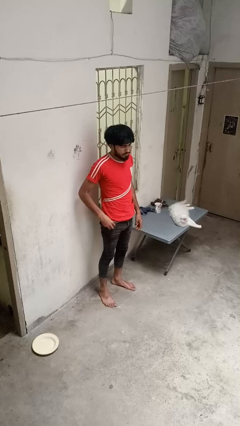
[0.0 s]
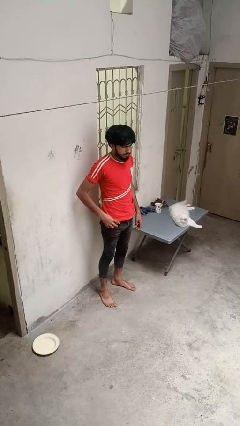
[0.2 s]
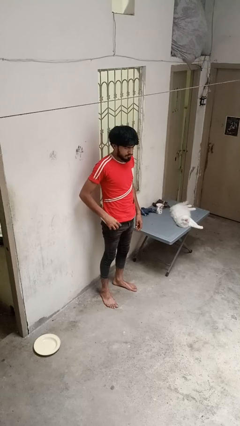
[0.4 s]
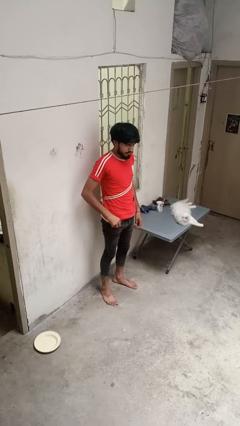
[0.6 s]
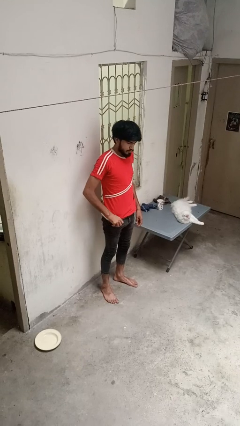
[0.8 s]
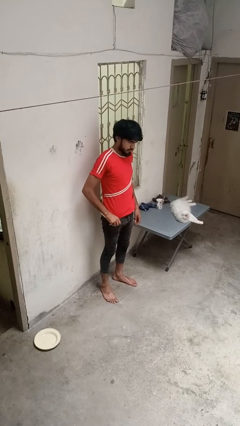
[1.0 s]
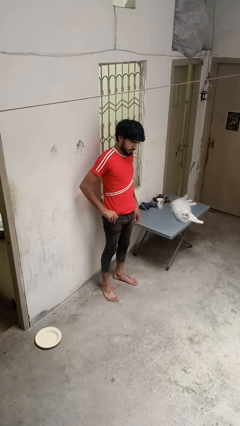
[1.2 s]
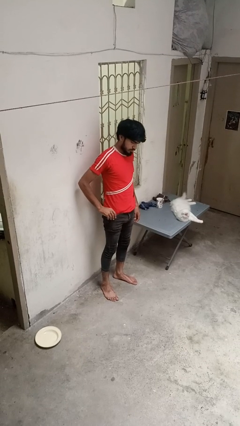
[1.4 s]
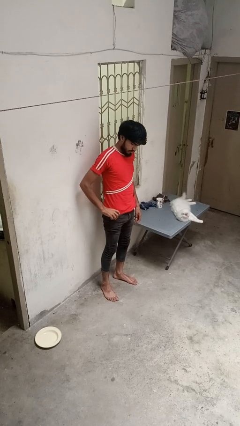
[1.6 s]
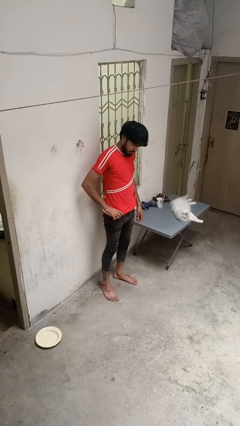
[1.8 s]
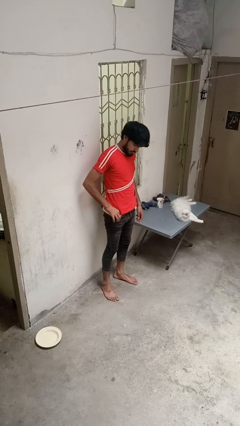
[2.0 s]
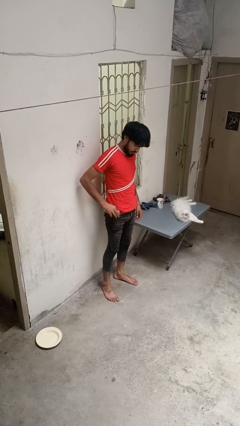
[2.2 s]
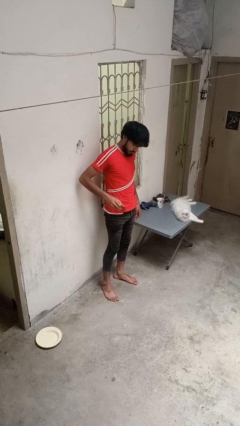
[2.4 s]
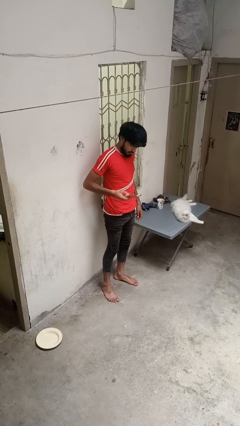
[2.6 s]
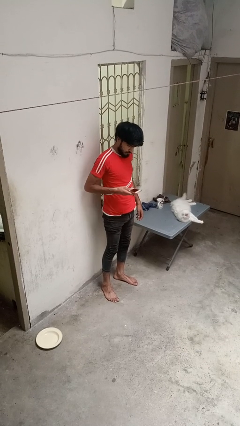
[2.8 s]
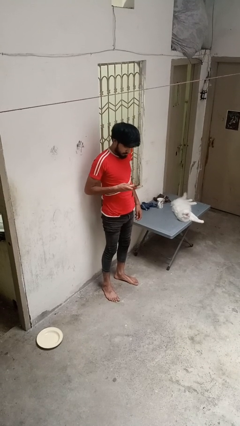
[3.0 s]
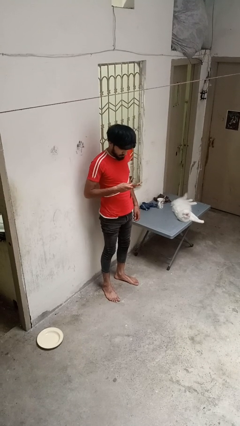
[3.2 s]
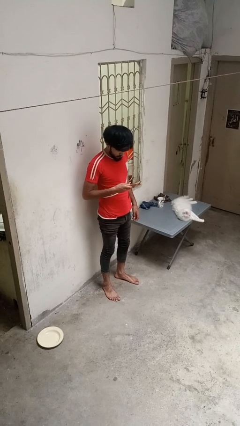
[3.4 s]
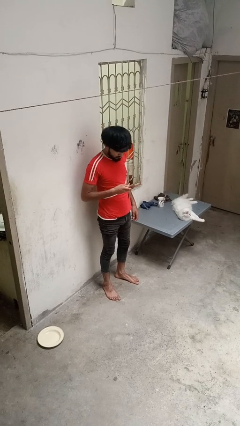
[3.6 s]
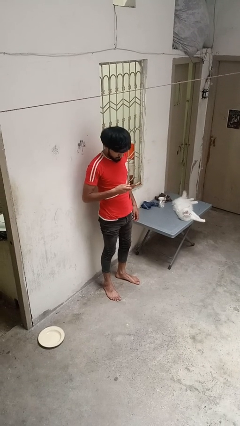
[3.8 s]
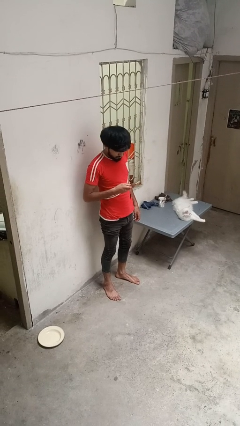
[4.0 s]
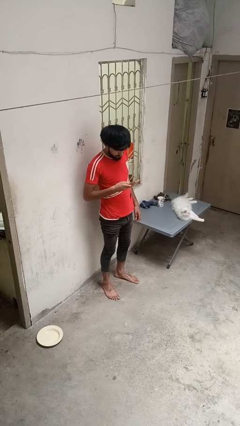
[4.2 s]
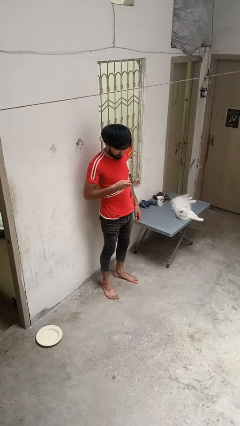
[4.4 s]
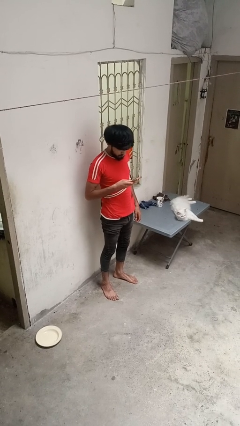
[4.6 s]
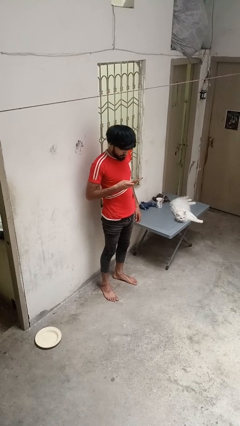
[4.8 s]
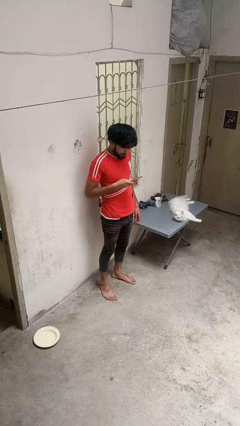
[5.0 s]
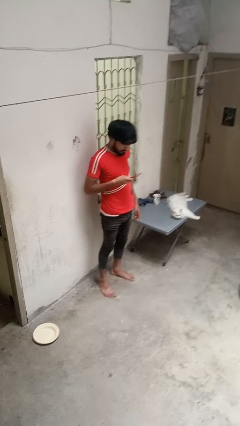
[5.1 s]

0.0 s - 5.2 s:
person takes phone from pocket

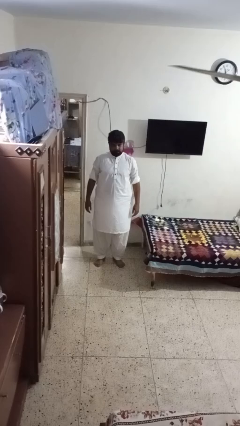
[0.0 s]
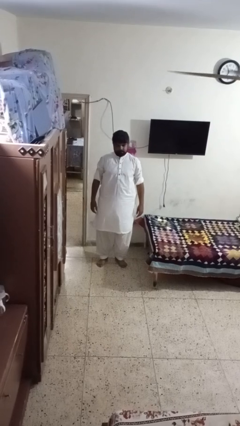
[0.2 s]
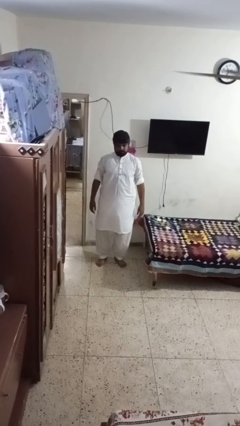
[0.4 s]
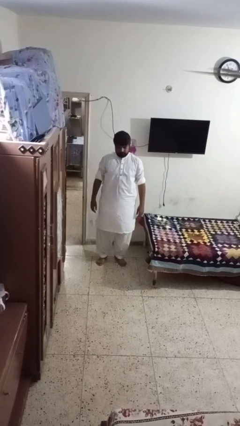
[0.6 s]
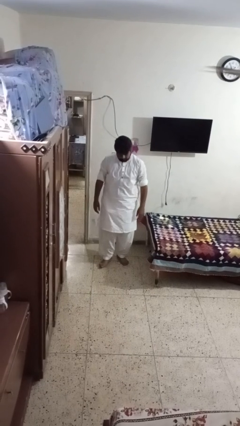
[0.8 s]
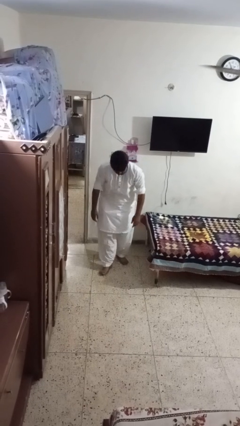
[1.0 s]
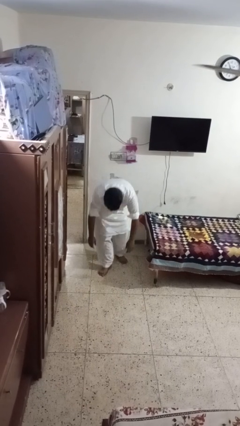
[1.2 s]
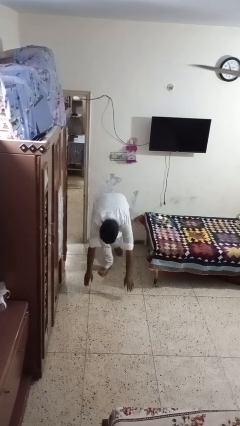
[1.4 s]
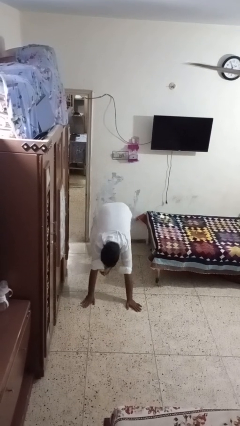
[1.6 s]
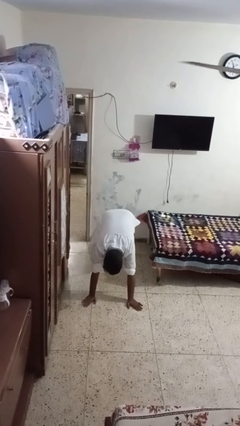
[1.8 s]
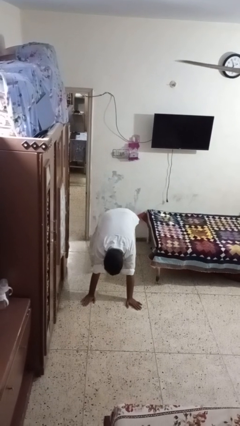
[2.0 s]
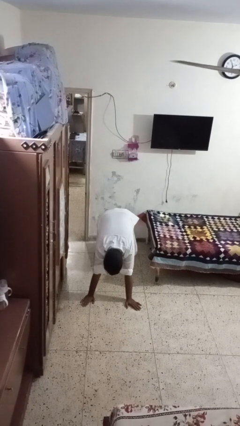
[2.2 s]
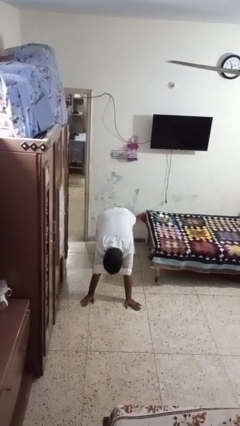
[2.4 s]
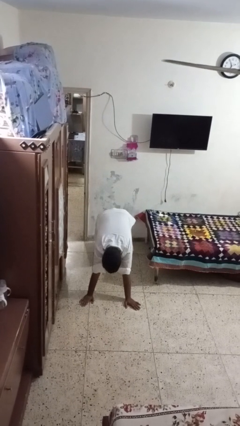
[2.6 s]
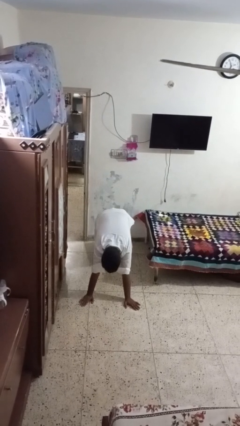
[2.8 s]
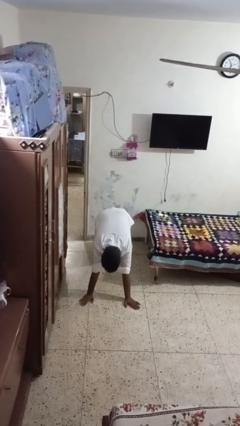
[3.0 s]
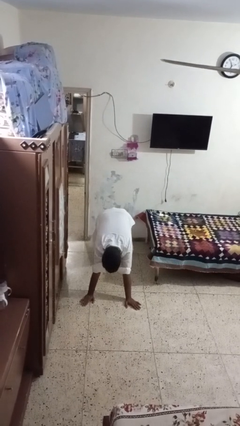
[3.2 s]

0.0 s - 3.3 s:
person exercises with plank

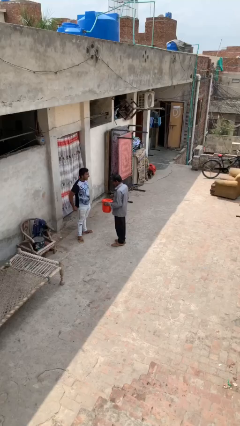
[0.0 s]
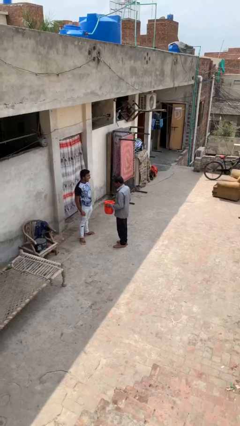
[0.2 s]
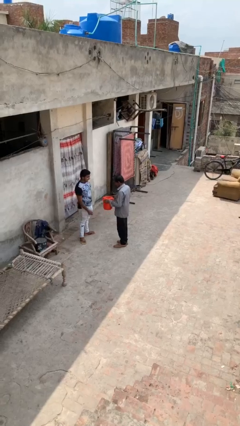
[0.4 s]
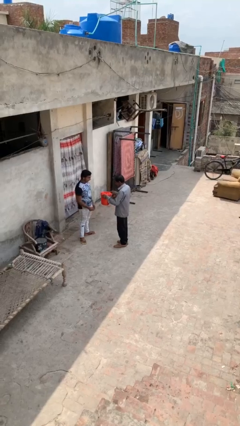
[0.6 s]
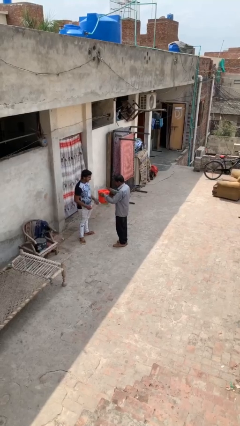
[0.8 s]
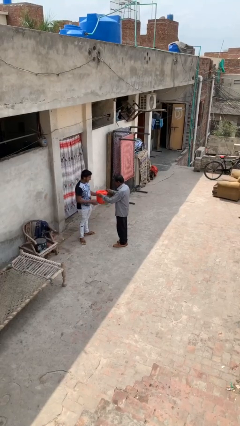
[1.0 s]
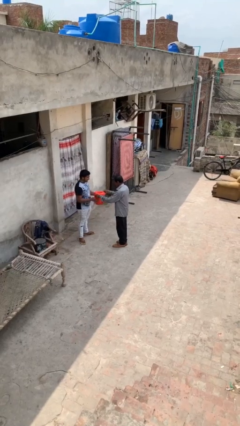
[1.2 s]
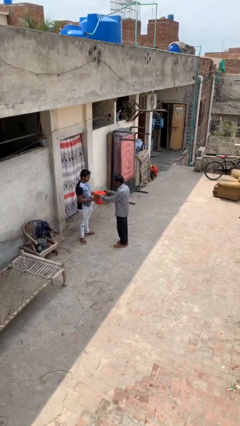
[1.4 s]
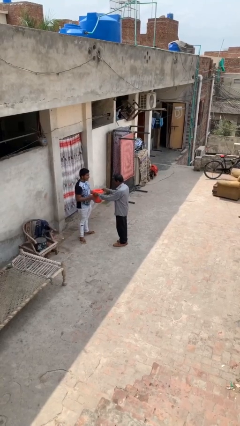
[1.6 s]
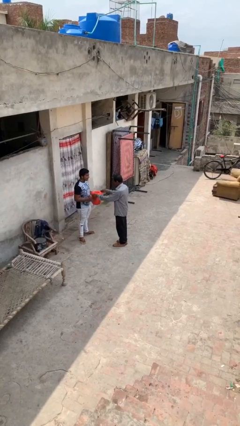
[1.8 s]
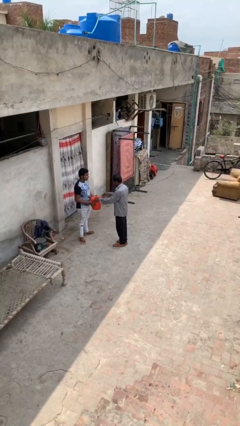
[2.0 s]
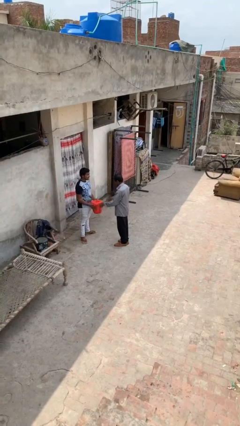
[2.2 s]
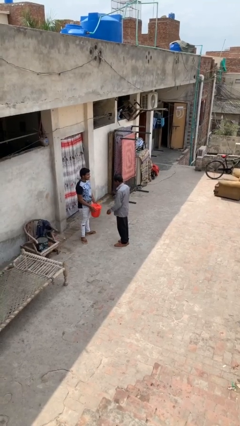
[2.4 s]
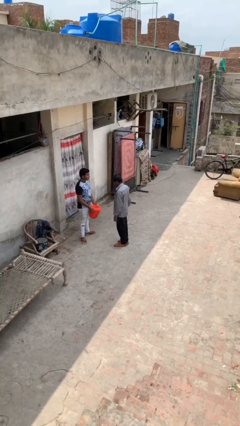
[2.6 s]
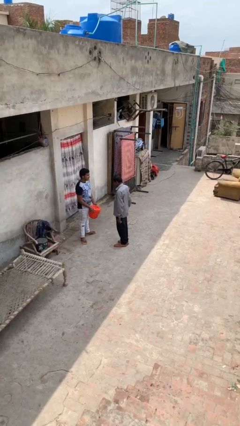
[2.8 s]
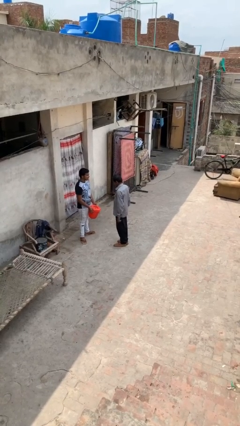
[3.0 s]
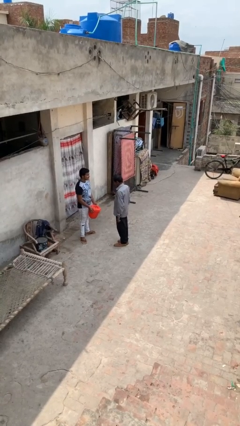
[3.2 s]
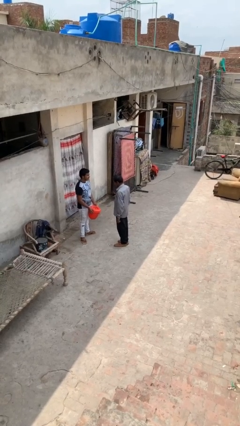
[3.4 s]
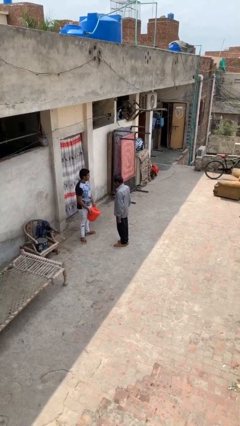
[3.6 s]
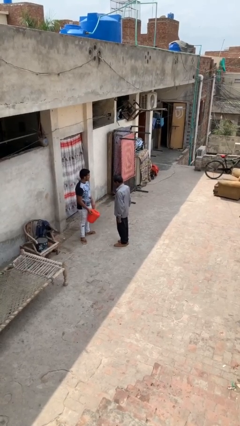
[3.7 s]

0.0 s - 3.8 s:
person transfers object to person

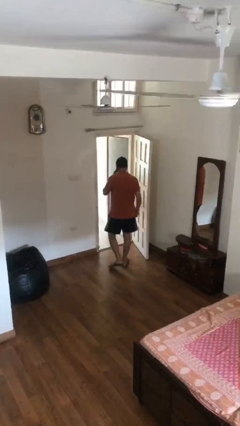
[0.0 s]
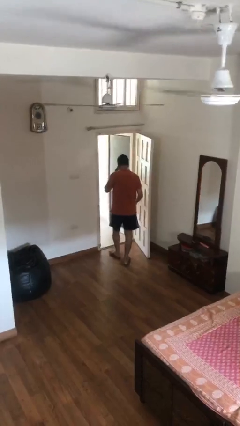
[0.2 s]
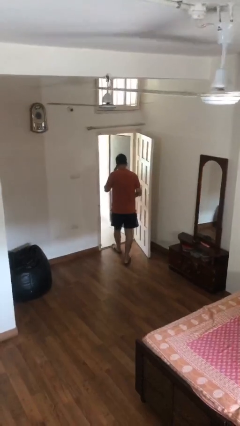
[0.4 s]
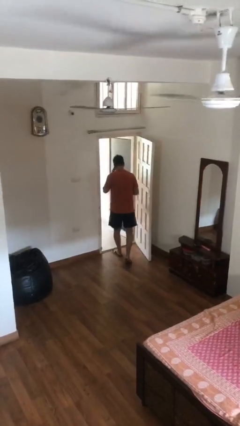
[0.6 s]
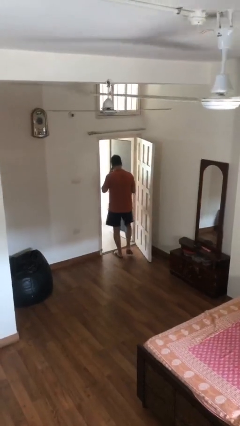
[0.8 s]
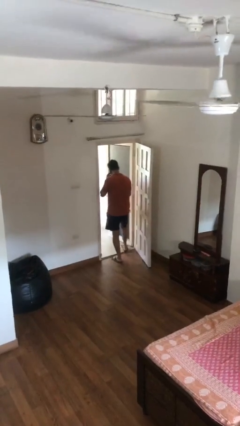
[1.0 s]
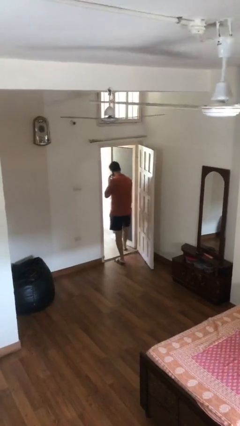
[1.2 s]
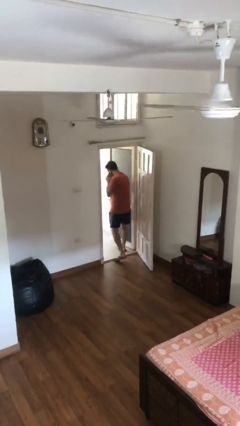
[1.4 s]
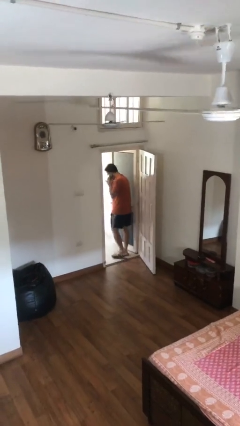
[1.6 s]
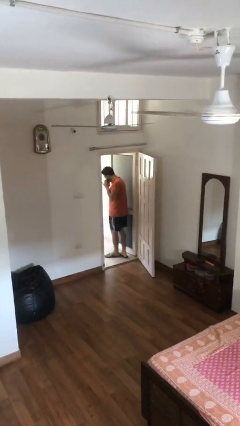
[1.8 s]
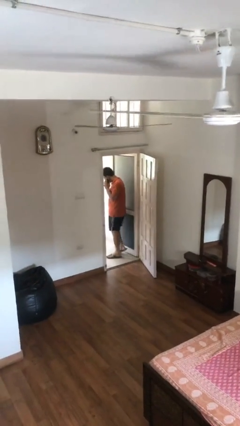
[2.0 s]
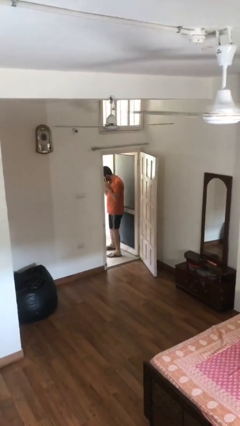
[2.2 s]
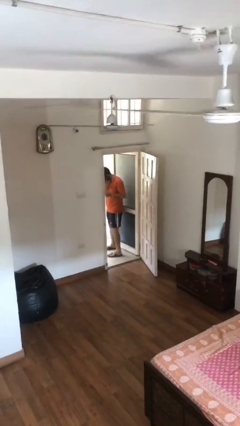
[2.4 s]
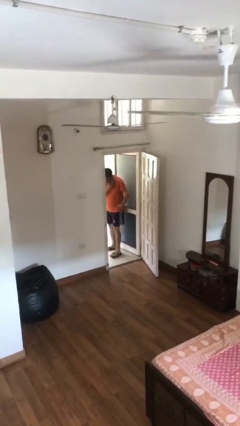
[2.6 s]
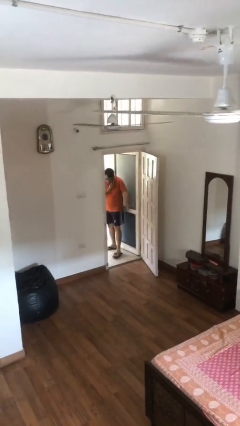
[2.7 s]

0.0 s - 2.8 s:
person exits scene through structure

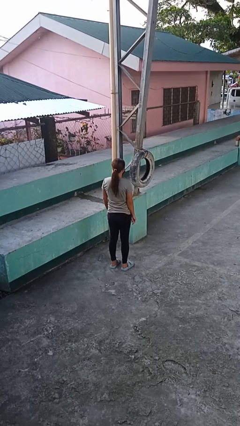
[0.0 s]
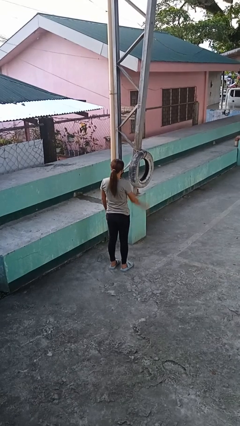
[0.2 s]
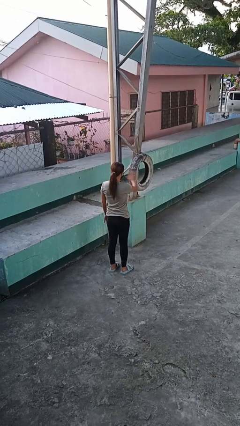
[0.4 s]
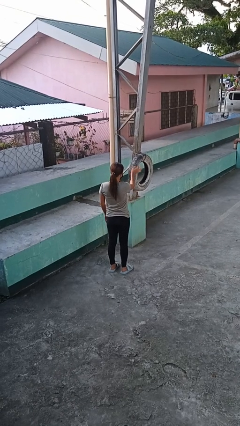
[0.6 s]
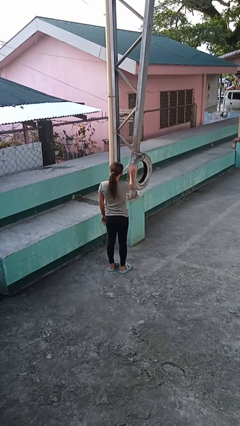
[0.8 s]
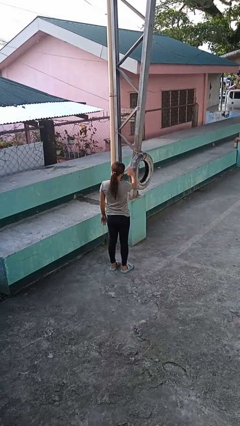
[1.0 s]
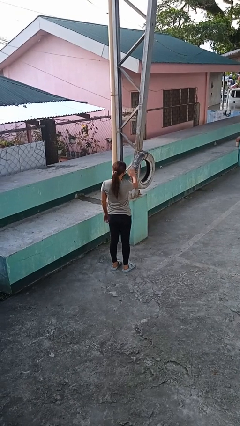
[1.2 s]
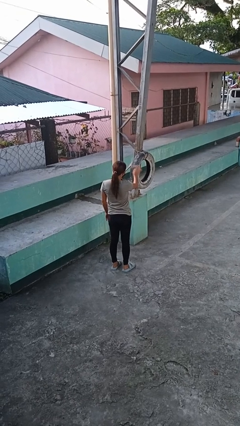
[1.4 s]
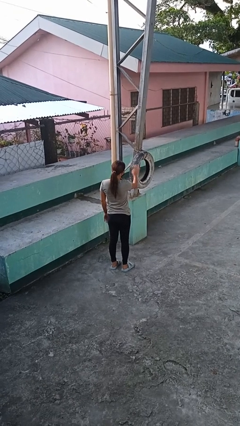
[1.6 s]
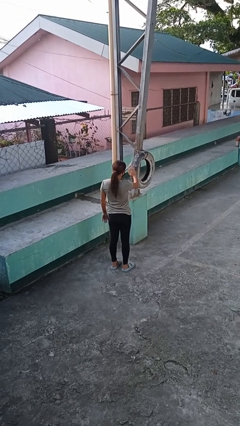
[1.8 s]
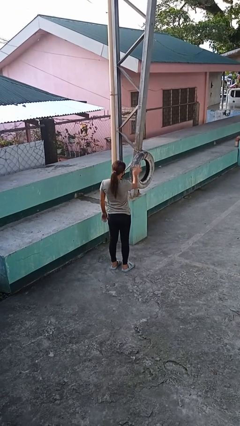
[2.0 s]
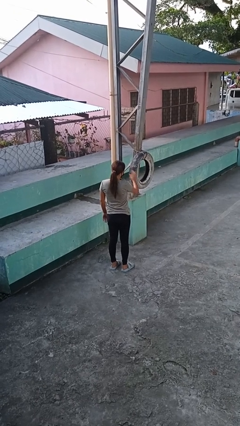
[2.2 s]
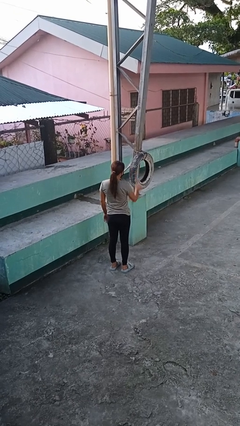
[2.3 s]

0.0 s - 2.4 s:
person waves hand over object

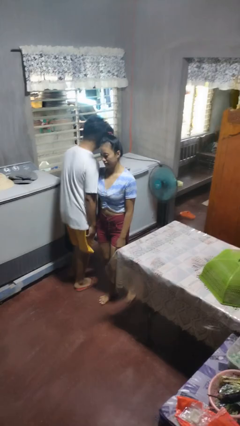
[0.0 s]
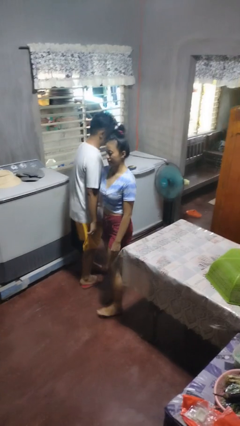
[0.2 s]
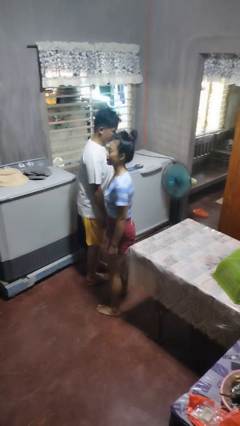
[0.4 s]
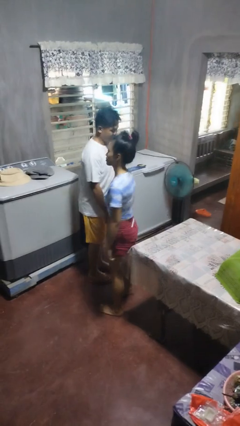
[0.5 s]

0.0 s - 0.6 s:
person bumps into person
